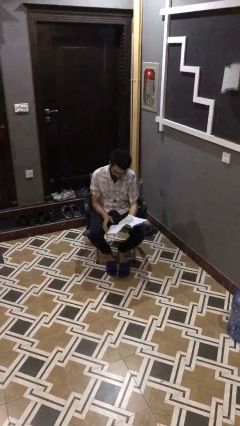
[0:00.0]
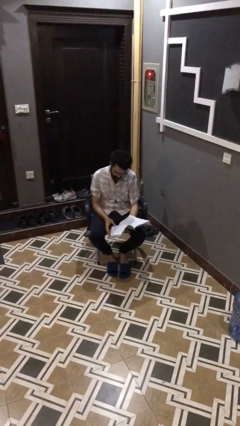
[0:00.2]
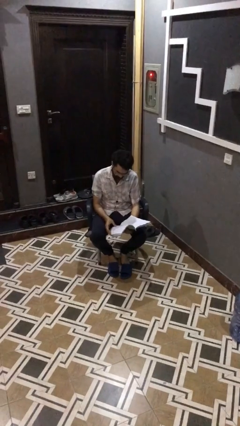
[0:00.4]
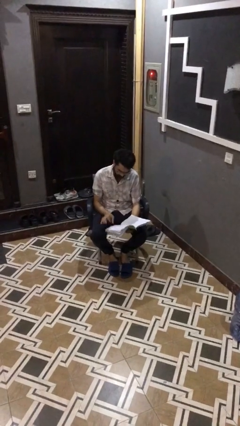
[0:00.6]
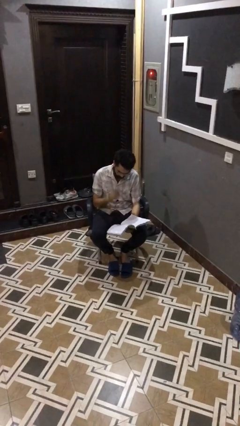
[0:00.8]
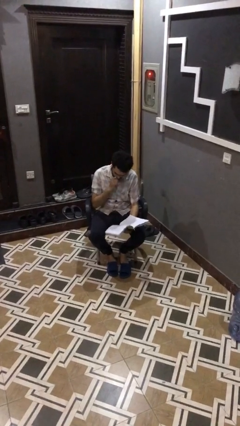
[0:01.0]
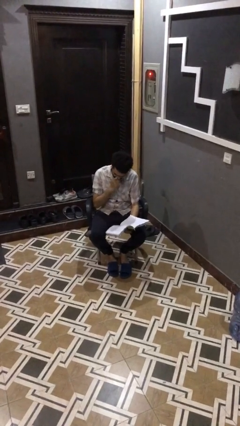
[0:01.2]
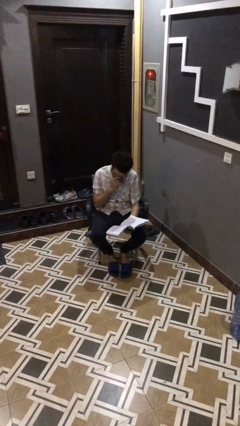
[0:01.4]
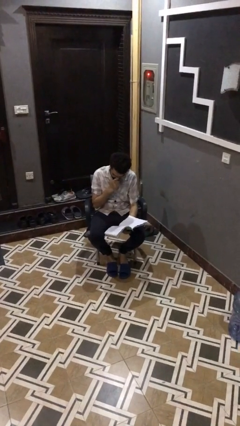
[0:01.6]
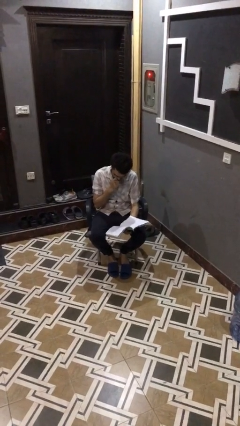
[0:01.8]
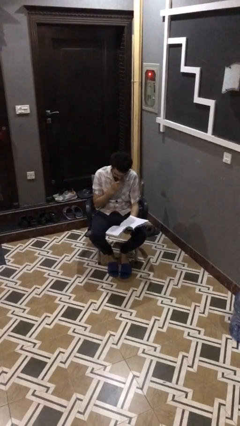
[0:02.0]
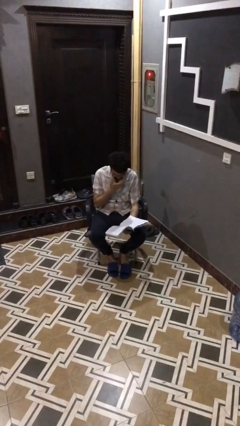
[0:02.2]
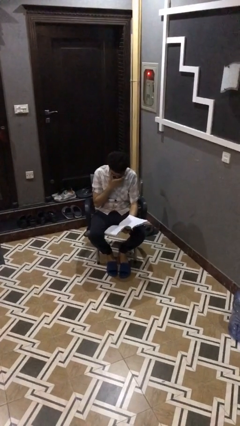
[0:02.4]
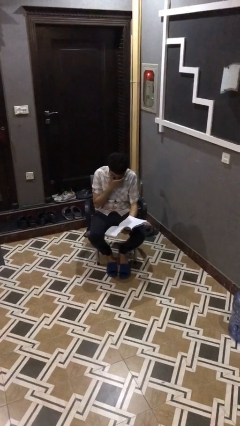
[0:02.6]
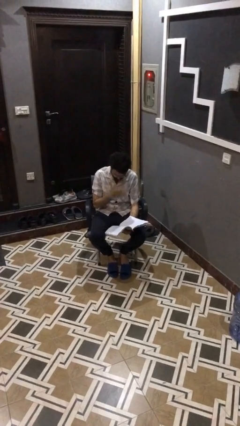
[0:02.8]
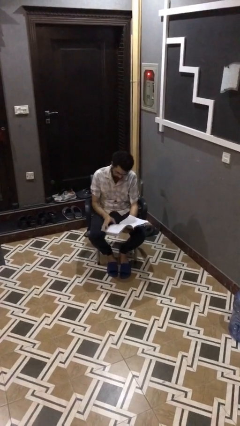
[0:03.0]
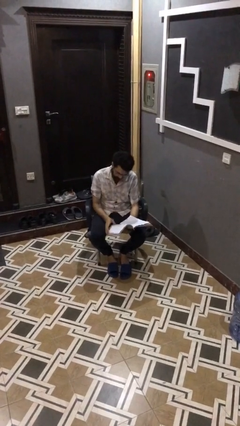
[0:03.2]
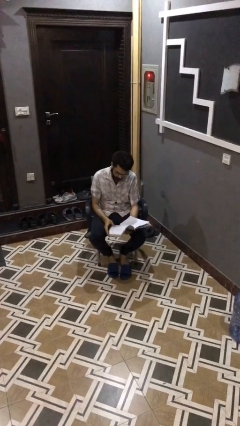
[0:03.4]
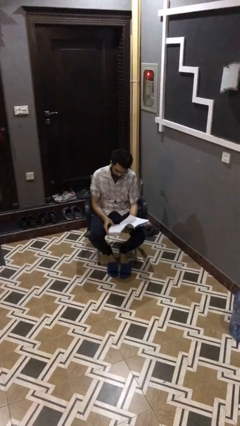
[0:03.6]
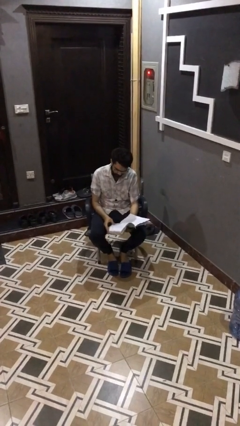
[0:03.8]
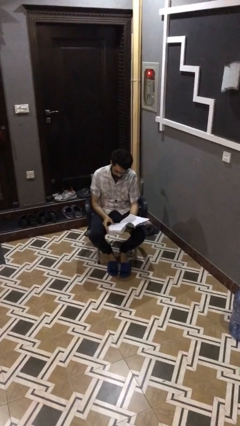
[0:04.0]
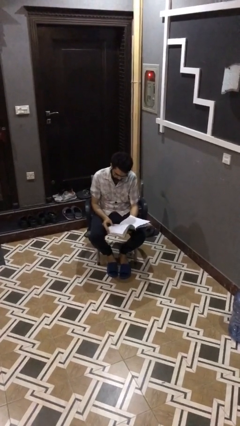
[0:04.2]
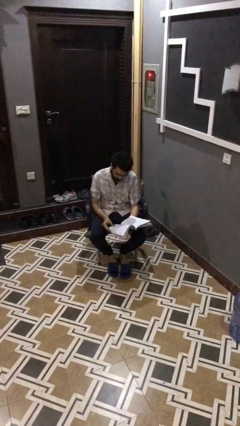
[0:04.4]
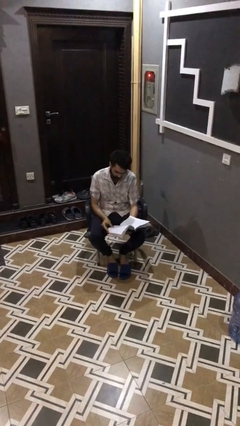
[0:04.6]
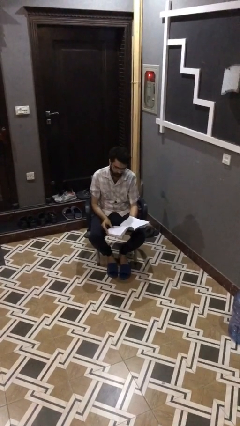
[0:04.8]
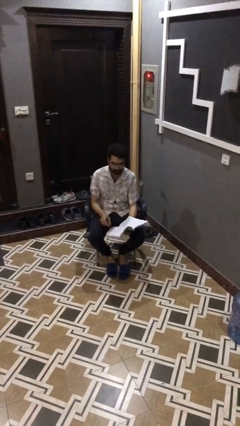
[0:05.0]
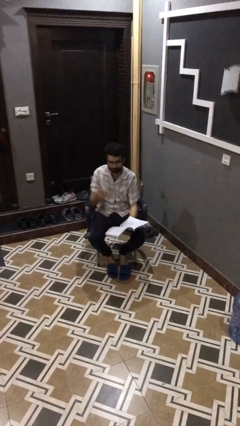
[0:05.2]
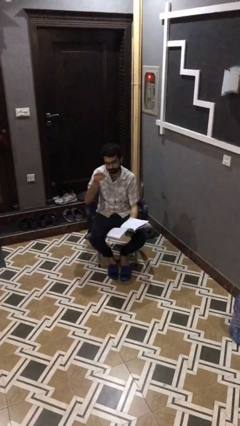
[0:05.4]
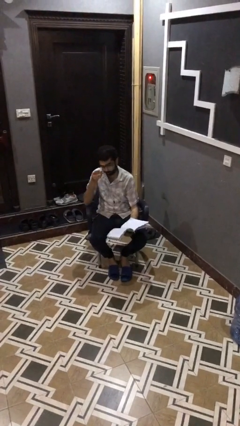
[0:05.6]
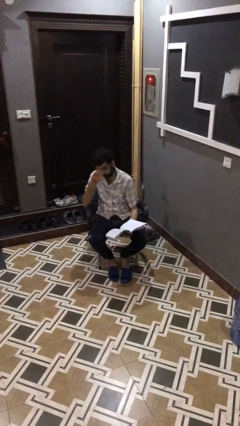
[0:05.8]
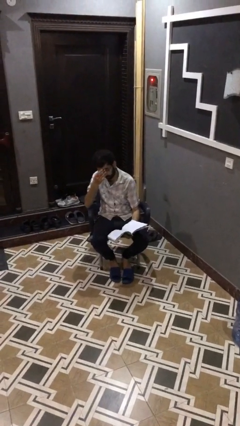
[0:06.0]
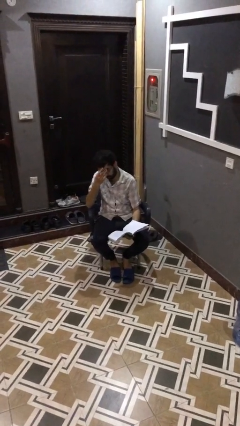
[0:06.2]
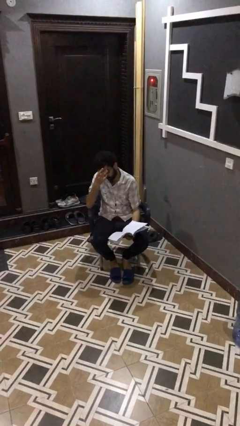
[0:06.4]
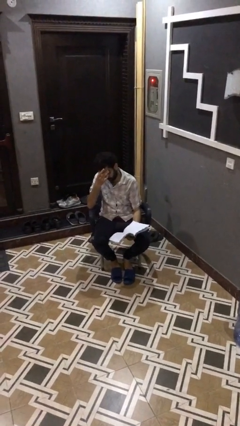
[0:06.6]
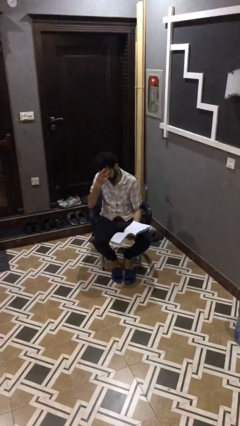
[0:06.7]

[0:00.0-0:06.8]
person reads document

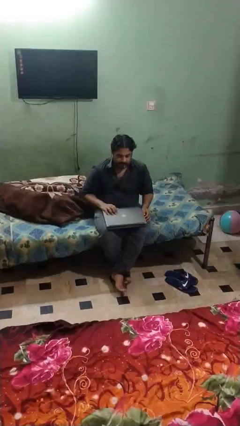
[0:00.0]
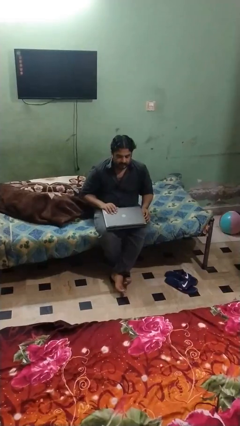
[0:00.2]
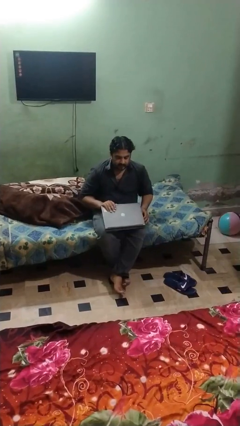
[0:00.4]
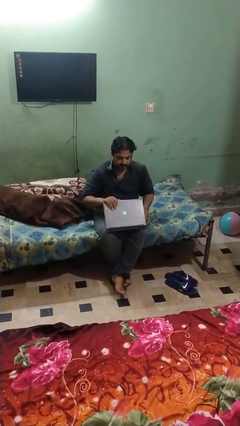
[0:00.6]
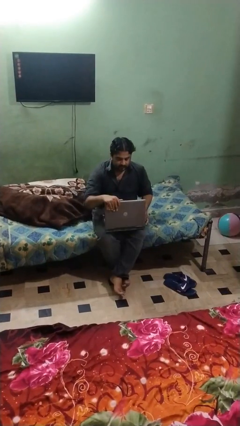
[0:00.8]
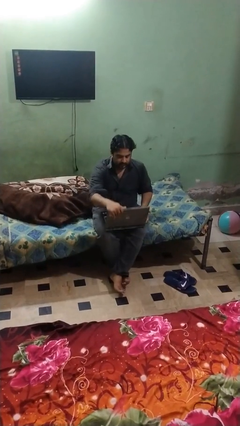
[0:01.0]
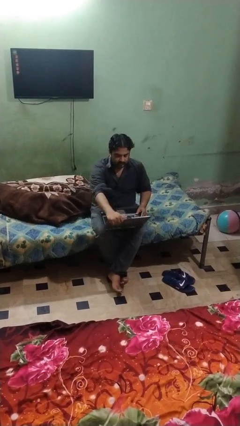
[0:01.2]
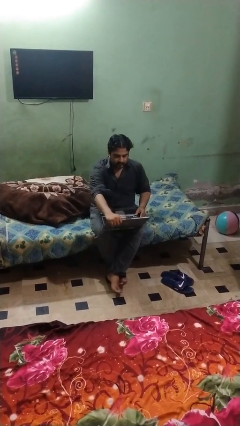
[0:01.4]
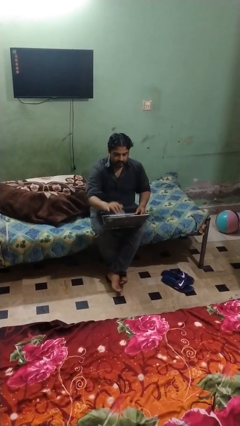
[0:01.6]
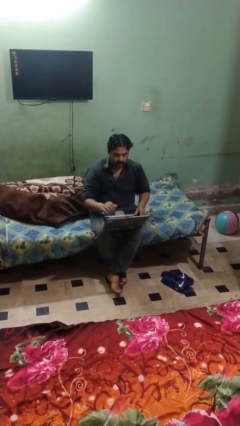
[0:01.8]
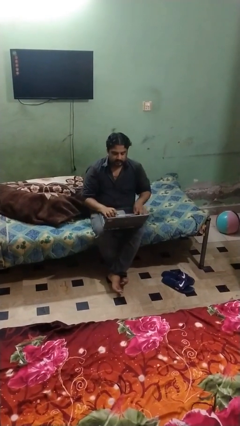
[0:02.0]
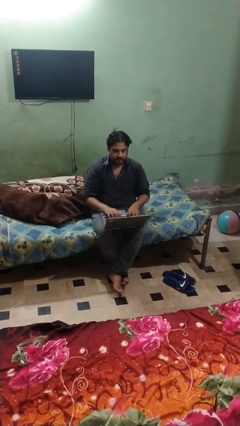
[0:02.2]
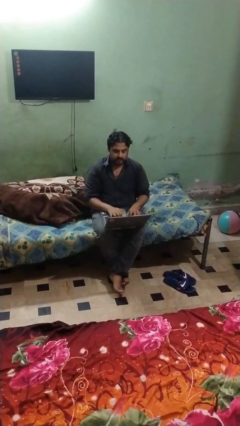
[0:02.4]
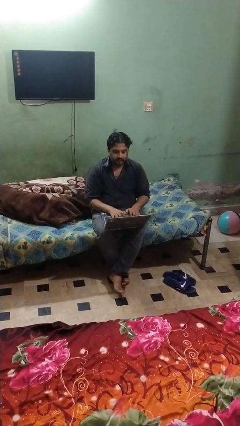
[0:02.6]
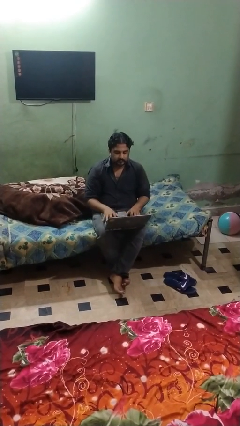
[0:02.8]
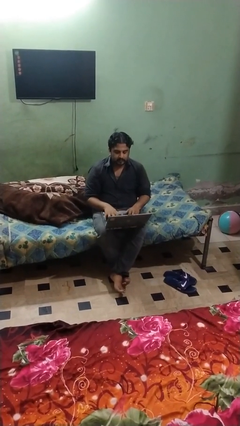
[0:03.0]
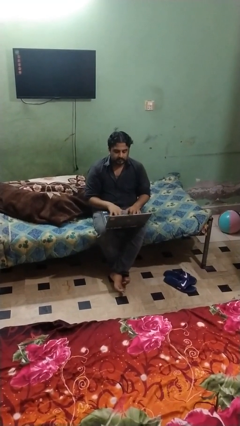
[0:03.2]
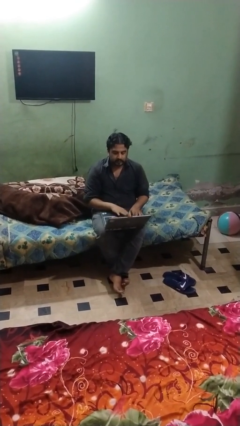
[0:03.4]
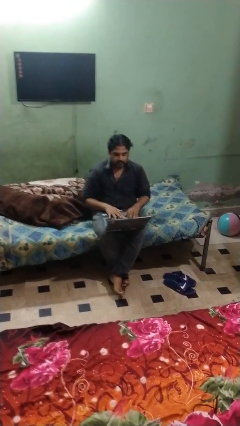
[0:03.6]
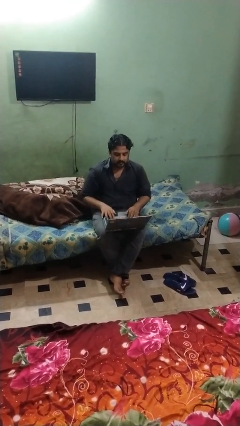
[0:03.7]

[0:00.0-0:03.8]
person opens laptop

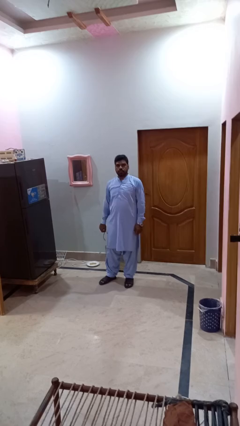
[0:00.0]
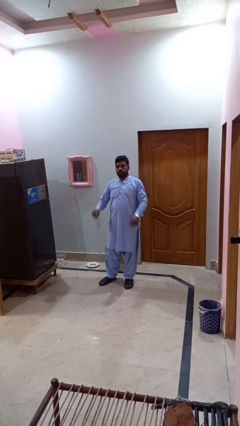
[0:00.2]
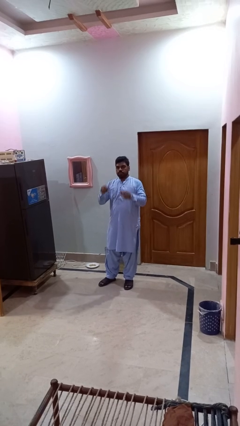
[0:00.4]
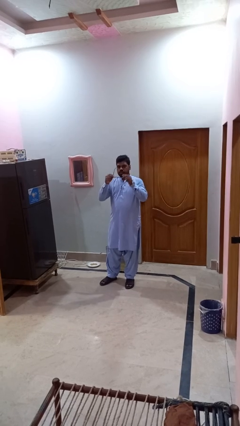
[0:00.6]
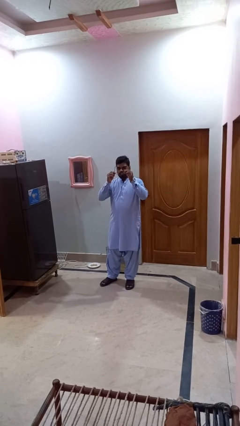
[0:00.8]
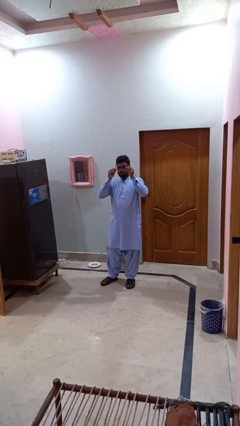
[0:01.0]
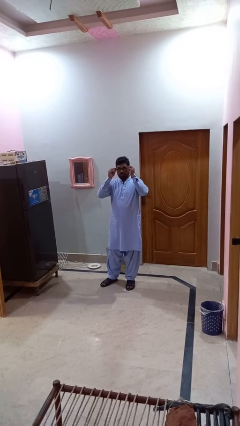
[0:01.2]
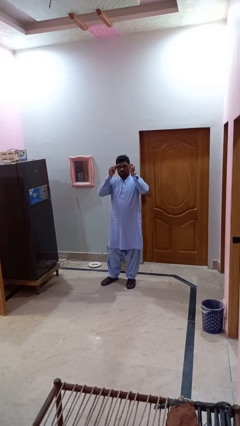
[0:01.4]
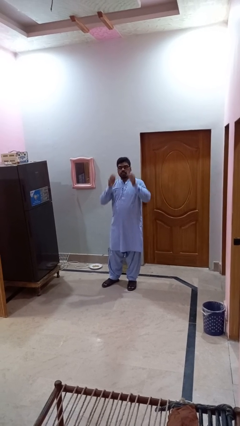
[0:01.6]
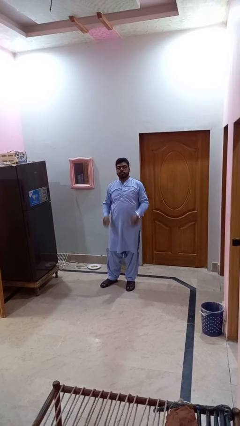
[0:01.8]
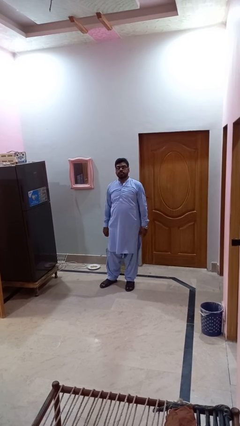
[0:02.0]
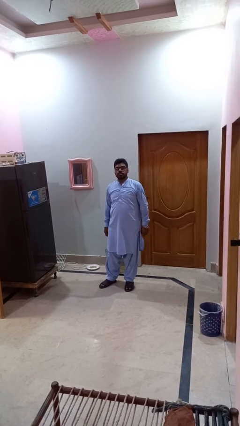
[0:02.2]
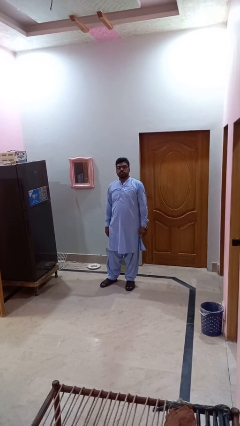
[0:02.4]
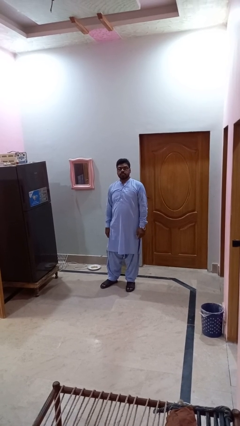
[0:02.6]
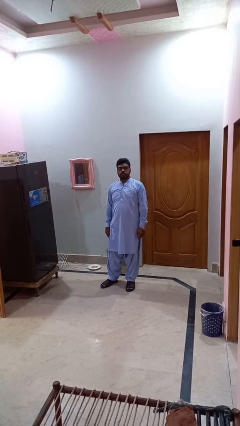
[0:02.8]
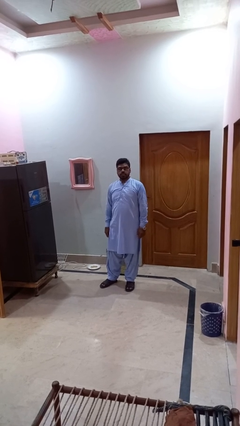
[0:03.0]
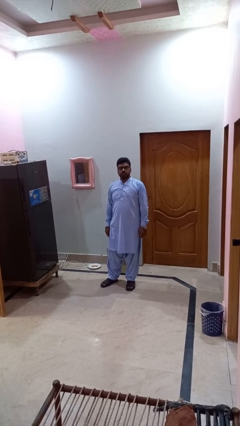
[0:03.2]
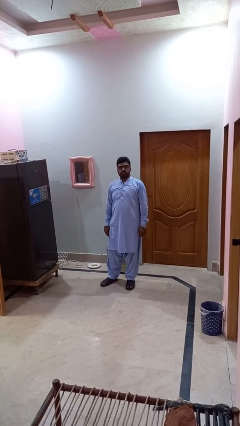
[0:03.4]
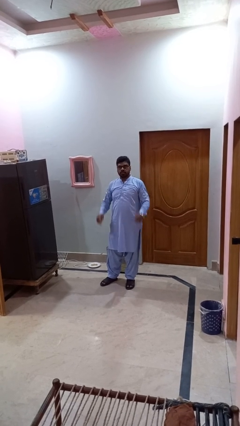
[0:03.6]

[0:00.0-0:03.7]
person puts on glasses

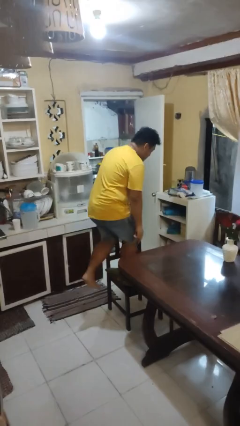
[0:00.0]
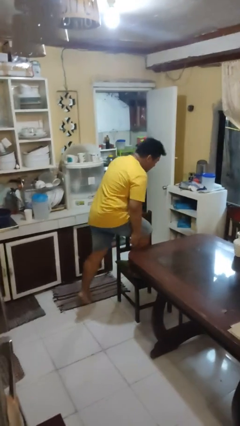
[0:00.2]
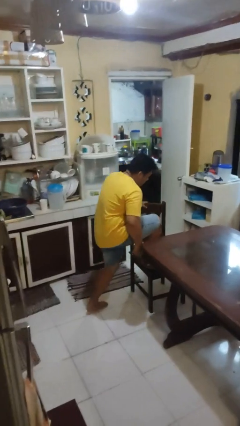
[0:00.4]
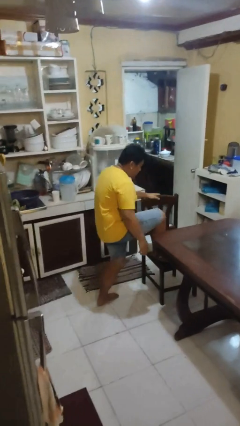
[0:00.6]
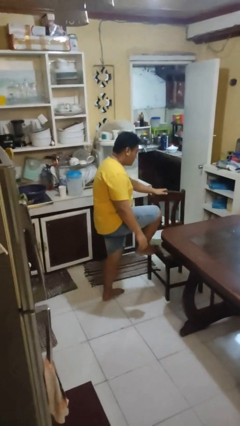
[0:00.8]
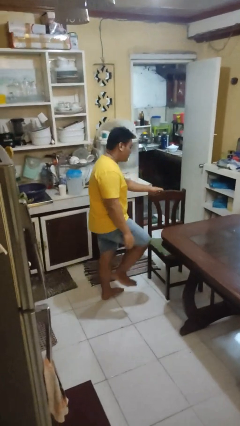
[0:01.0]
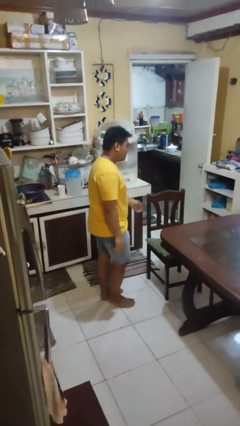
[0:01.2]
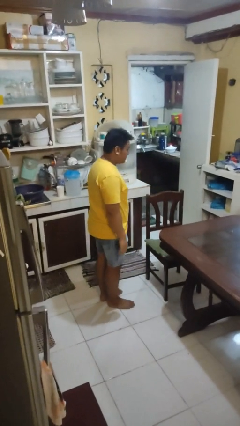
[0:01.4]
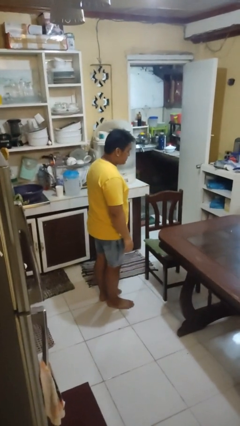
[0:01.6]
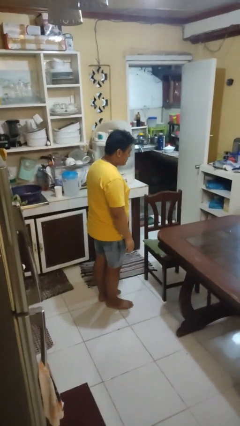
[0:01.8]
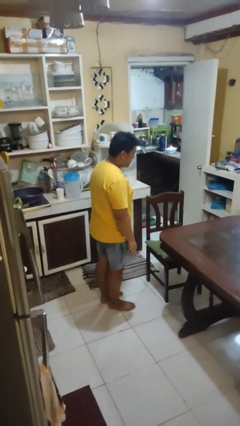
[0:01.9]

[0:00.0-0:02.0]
person climbs off chair

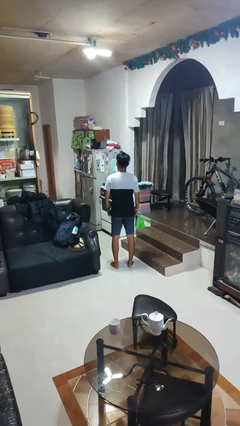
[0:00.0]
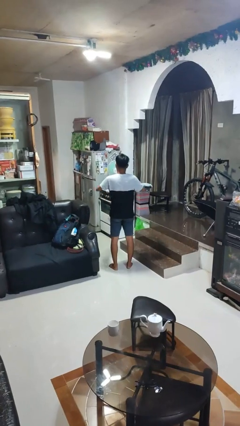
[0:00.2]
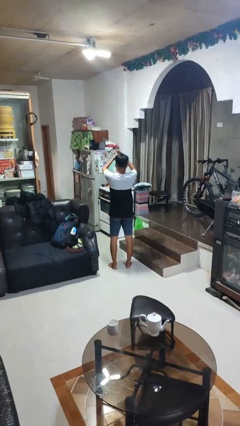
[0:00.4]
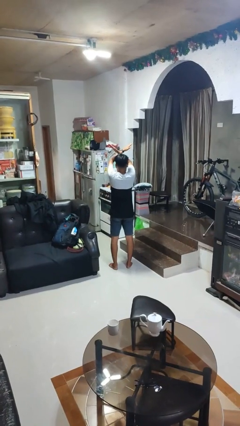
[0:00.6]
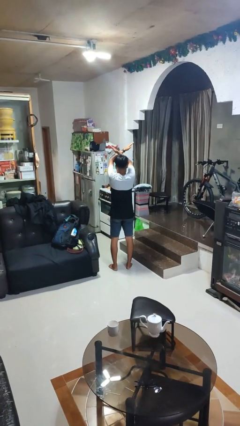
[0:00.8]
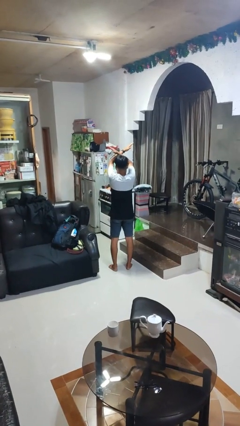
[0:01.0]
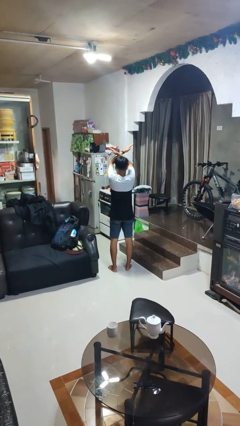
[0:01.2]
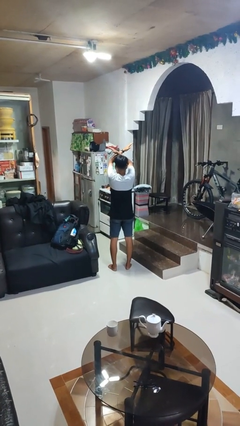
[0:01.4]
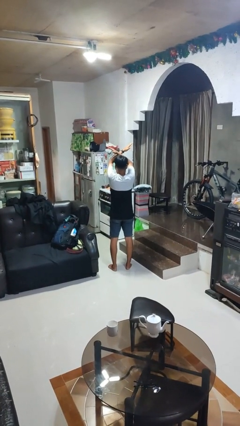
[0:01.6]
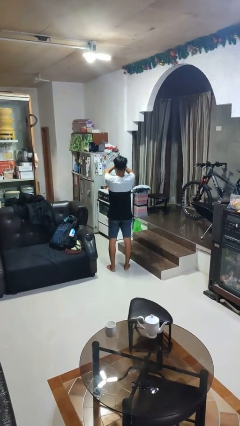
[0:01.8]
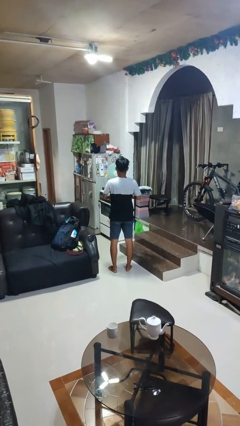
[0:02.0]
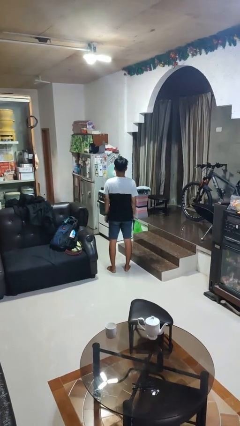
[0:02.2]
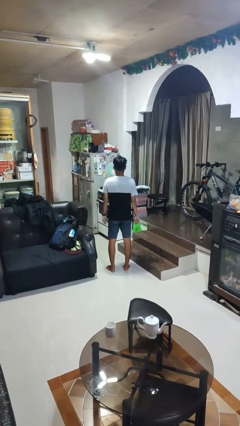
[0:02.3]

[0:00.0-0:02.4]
person gestures arms x
